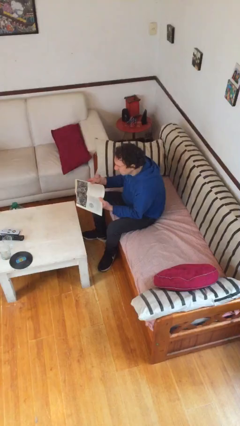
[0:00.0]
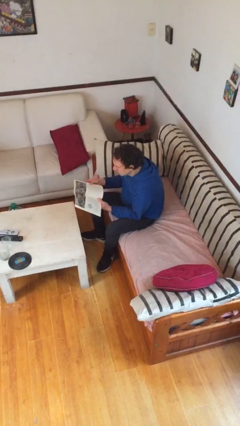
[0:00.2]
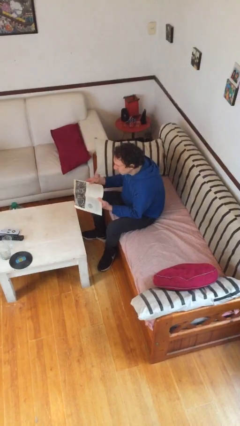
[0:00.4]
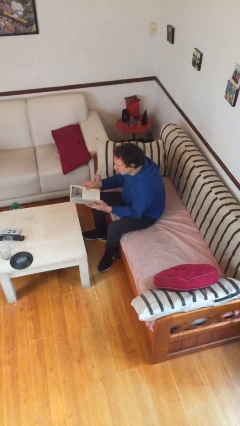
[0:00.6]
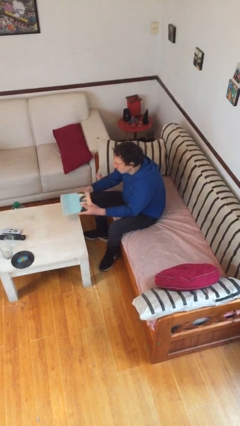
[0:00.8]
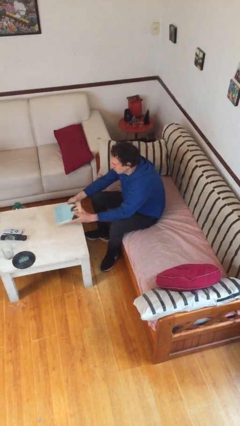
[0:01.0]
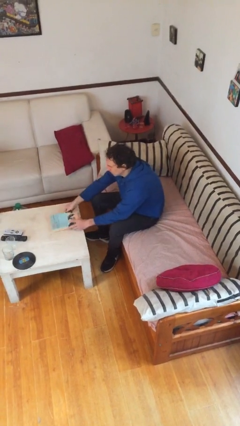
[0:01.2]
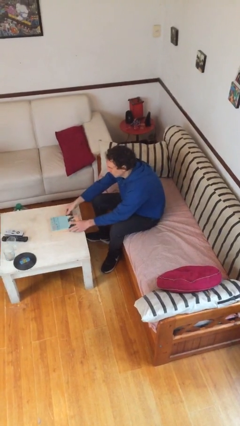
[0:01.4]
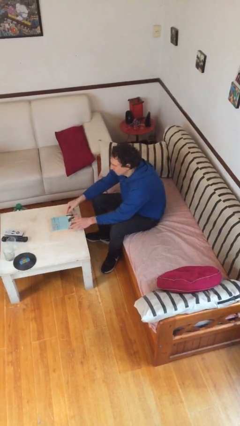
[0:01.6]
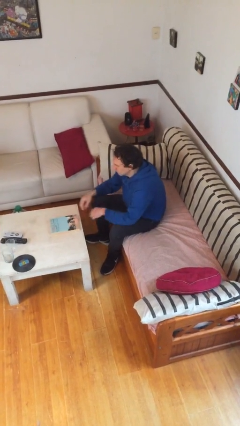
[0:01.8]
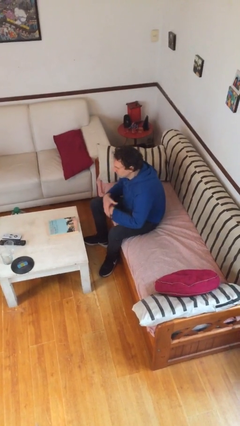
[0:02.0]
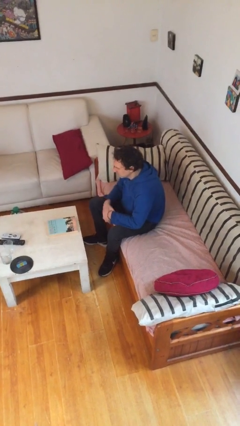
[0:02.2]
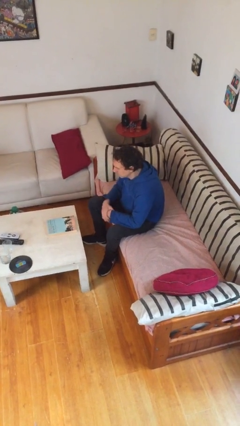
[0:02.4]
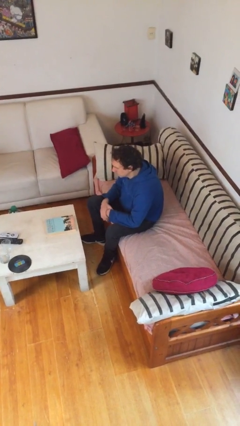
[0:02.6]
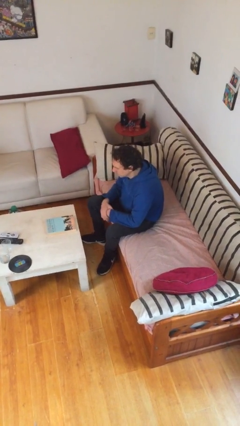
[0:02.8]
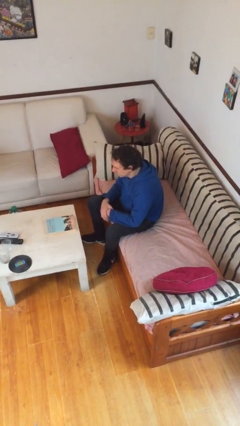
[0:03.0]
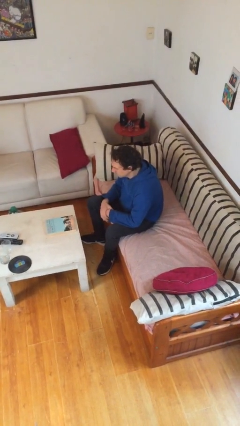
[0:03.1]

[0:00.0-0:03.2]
person puts down object on table

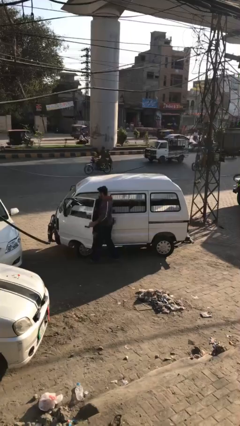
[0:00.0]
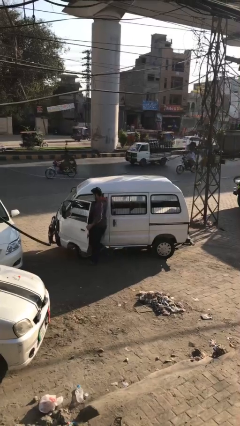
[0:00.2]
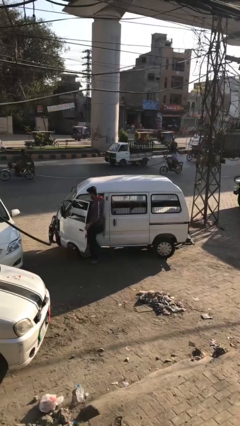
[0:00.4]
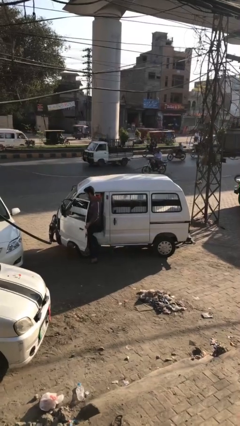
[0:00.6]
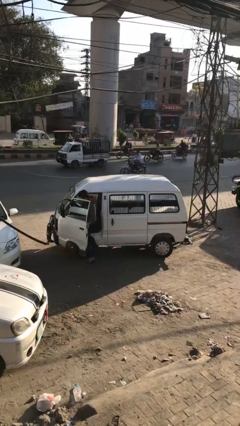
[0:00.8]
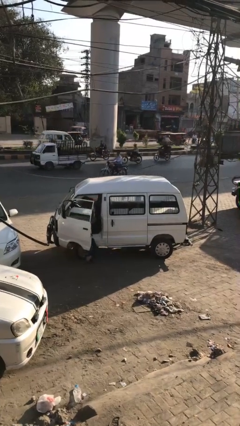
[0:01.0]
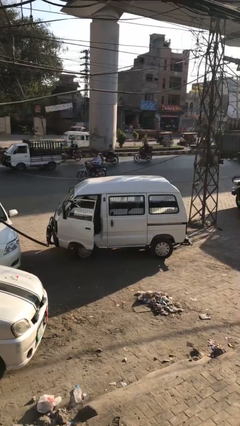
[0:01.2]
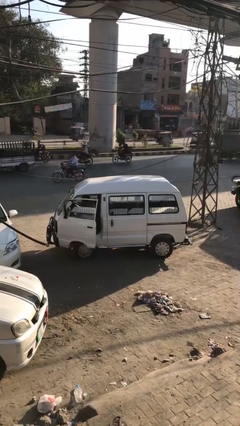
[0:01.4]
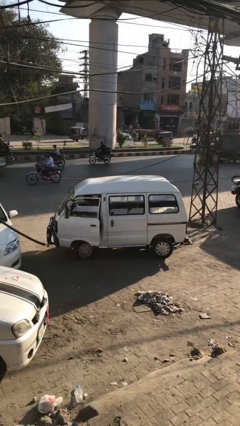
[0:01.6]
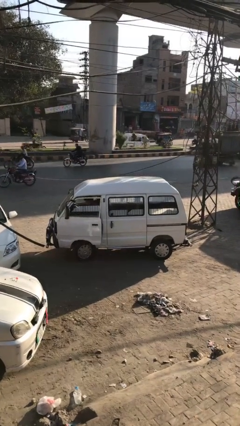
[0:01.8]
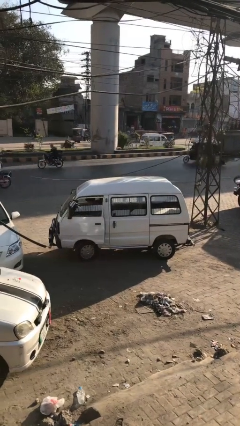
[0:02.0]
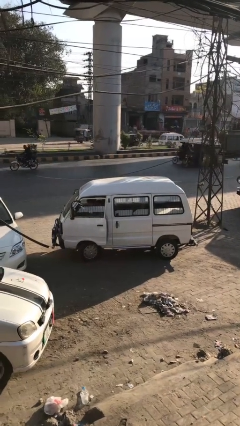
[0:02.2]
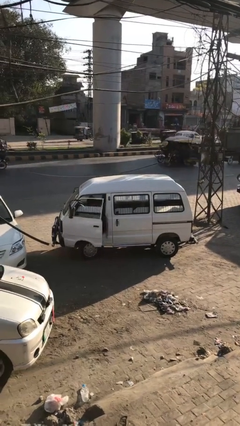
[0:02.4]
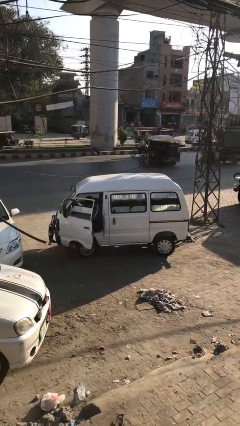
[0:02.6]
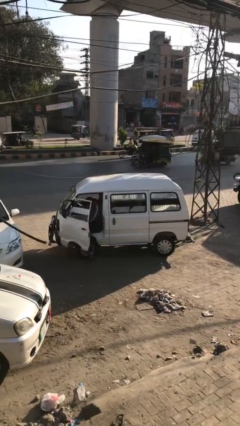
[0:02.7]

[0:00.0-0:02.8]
car picks up person

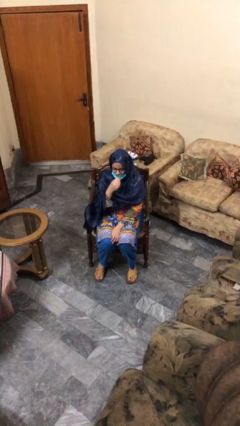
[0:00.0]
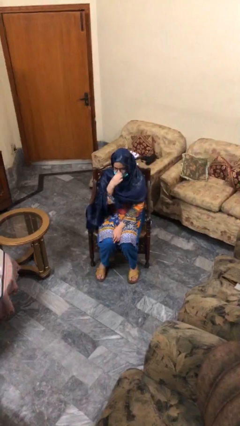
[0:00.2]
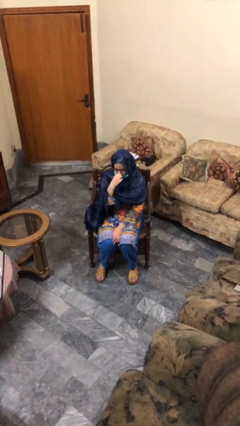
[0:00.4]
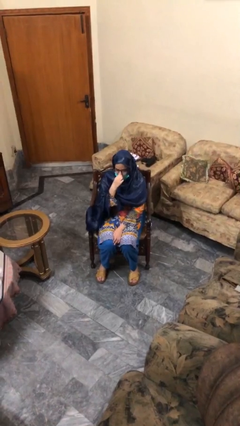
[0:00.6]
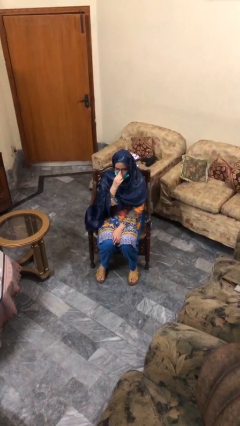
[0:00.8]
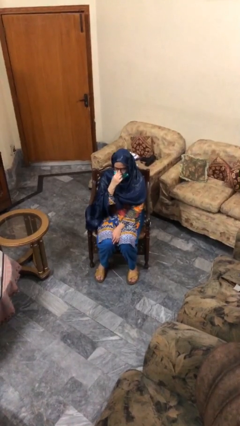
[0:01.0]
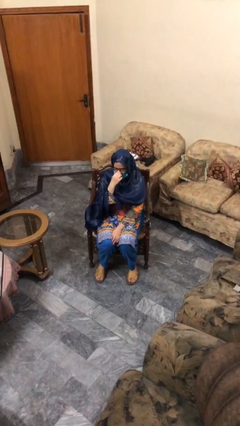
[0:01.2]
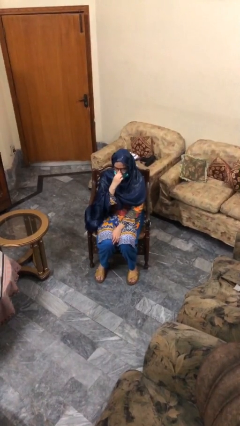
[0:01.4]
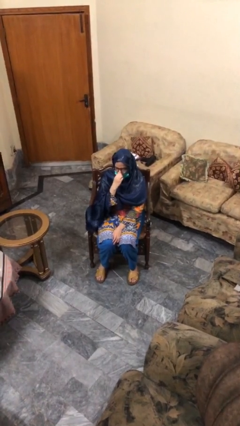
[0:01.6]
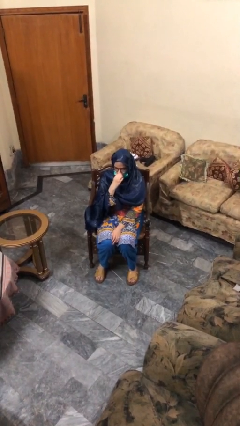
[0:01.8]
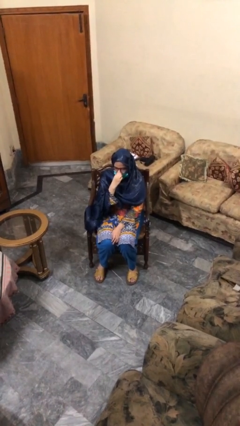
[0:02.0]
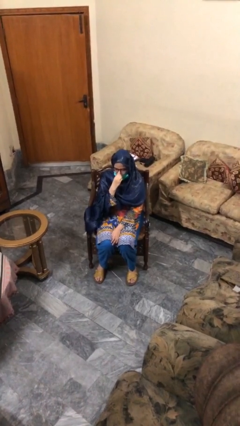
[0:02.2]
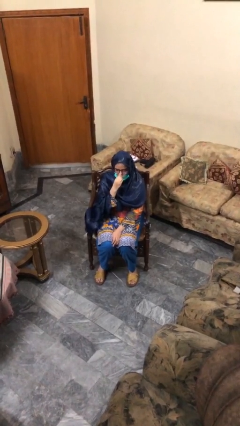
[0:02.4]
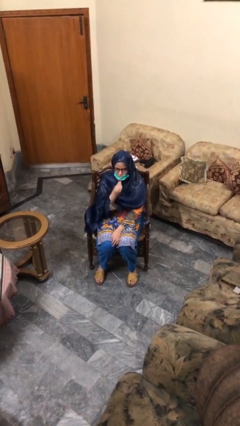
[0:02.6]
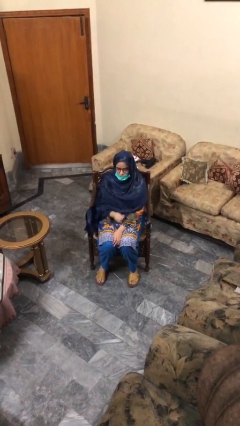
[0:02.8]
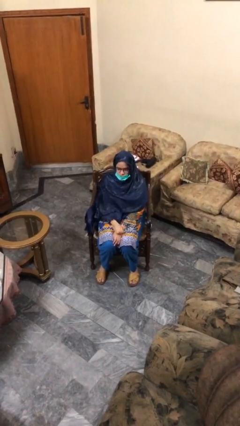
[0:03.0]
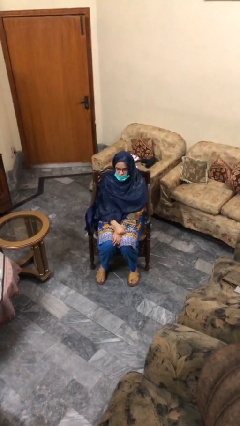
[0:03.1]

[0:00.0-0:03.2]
person blows nose

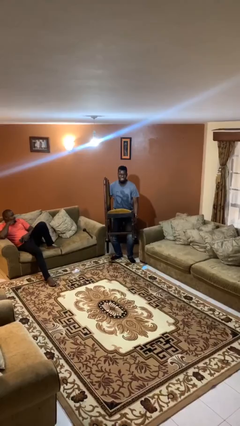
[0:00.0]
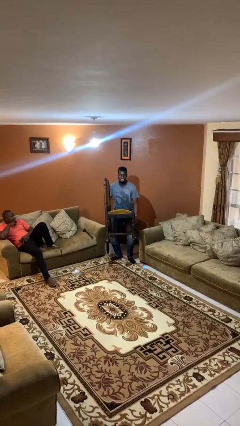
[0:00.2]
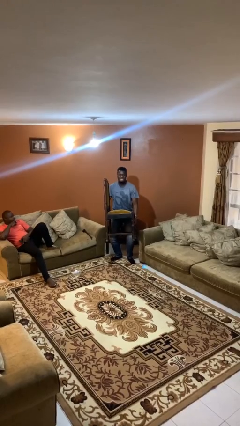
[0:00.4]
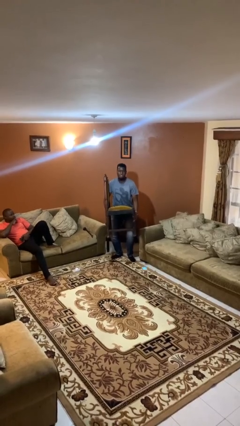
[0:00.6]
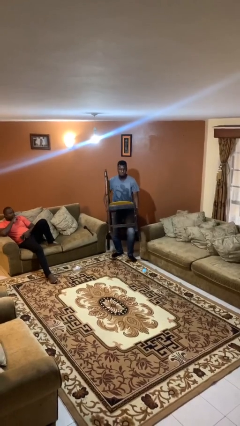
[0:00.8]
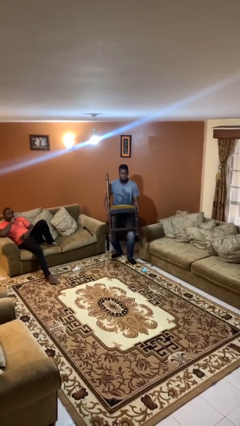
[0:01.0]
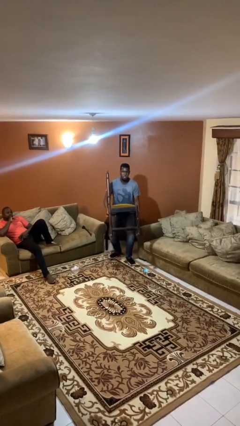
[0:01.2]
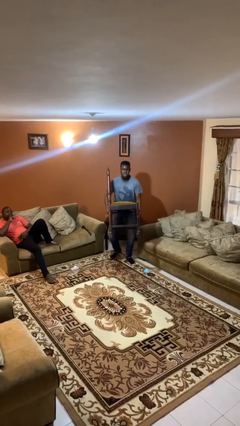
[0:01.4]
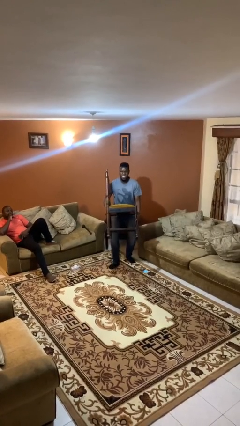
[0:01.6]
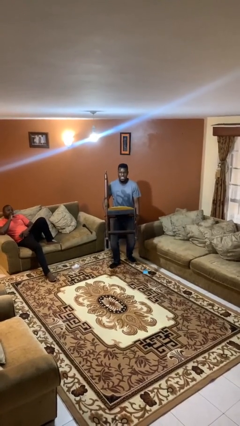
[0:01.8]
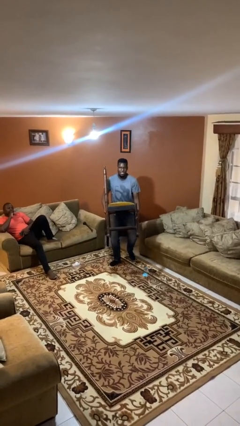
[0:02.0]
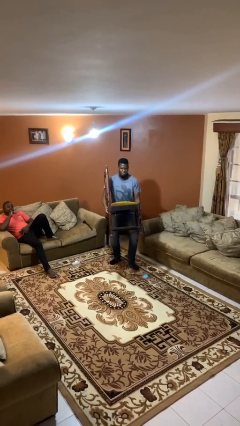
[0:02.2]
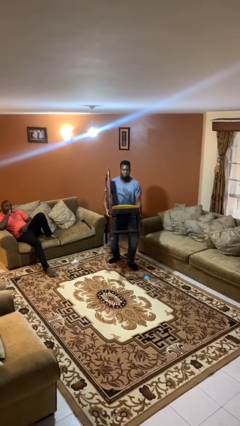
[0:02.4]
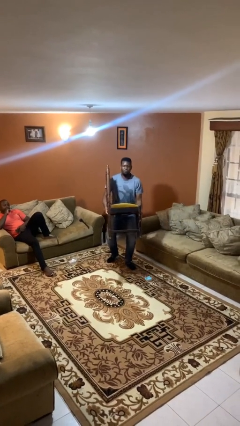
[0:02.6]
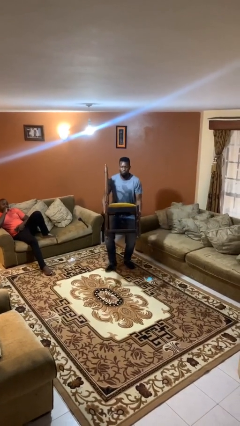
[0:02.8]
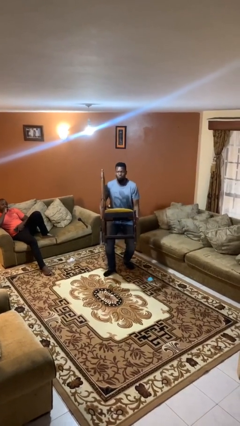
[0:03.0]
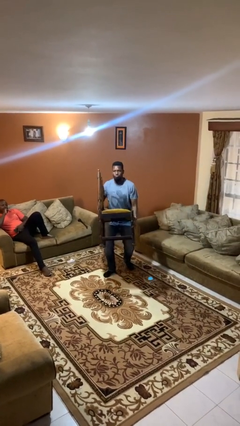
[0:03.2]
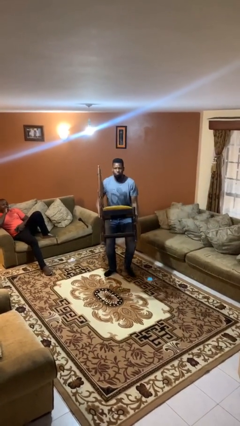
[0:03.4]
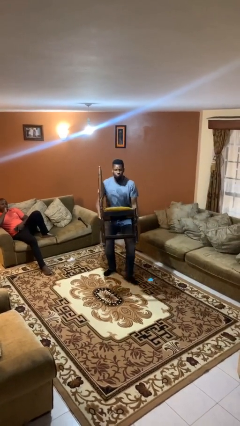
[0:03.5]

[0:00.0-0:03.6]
person carries heavy object

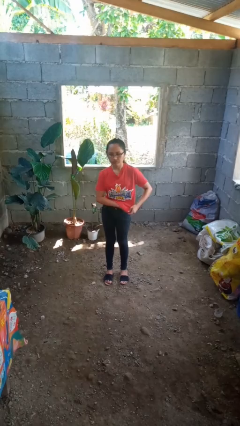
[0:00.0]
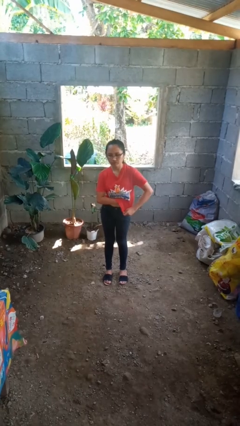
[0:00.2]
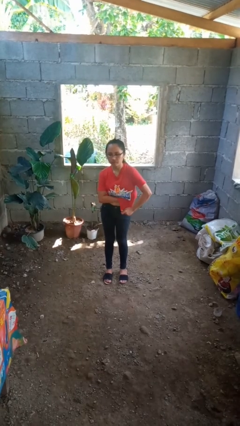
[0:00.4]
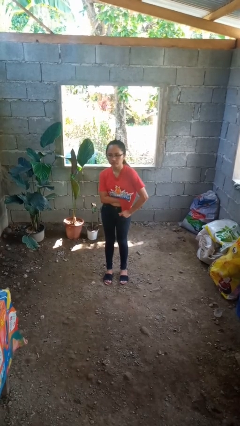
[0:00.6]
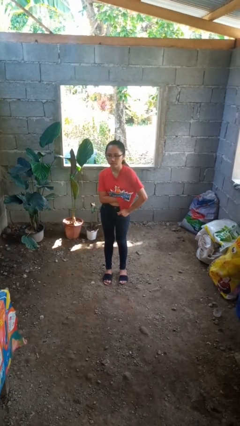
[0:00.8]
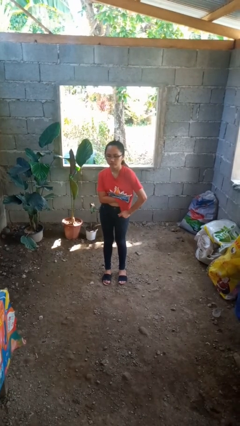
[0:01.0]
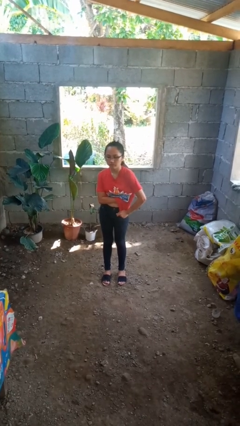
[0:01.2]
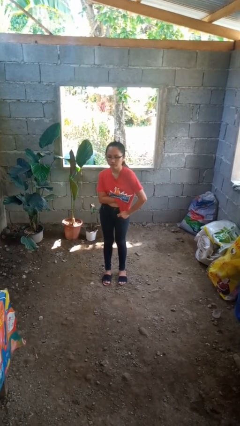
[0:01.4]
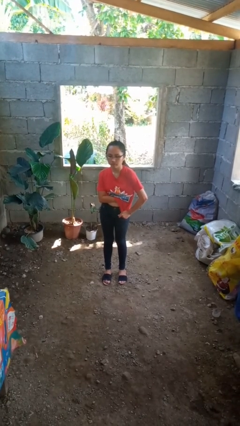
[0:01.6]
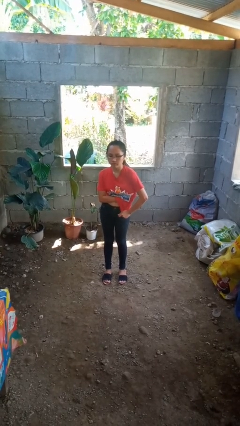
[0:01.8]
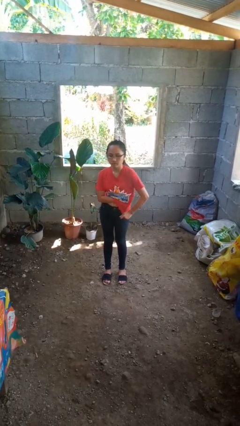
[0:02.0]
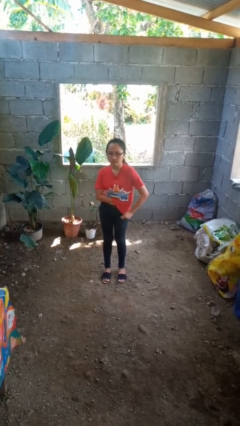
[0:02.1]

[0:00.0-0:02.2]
person applies deodorant

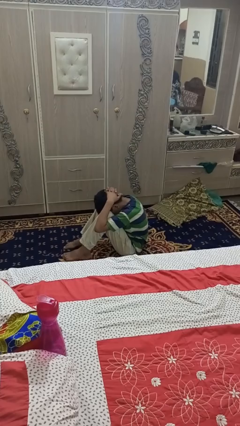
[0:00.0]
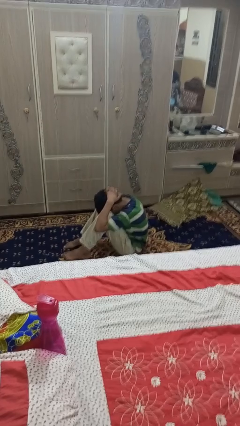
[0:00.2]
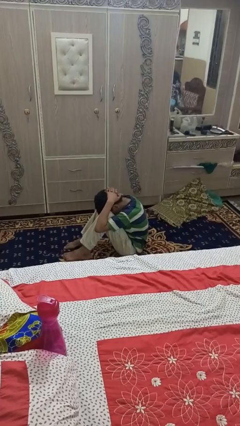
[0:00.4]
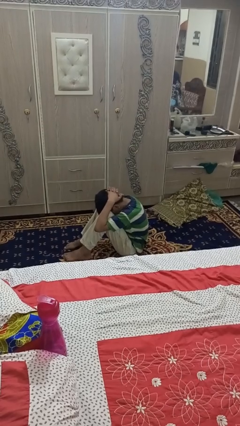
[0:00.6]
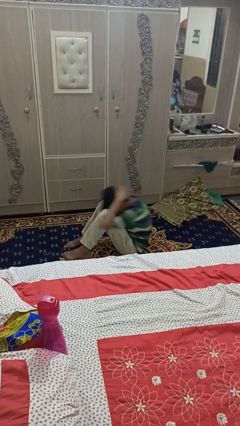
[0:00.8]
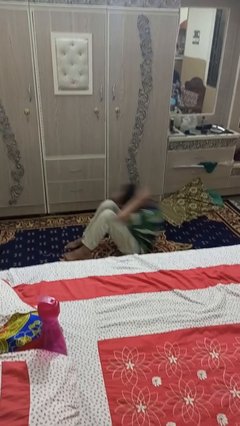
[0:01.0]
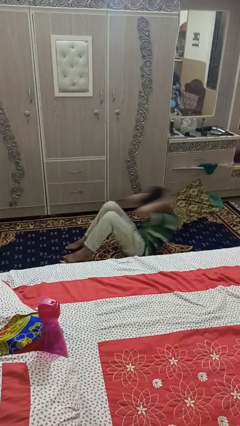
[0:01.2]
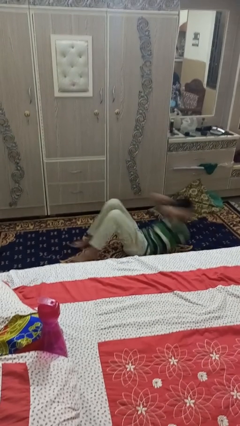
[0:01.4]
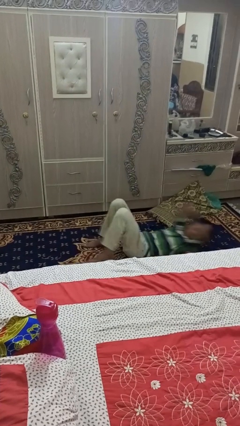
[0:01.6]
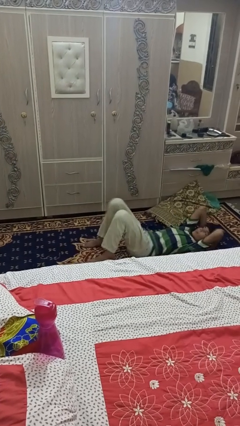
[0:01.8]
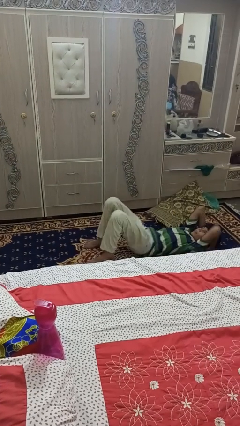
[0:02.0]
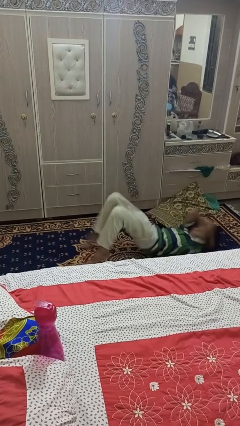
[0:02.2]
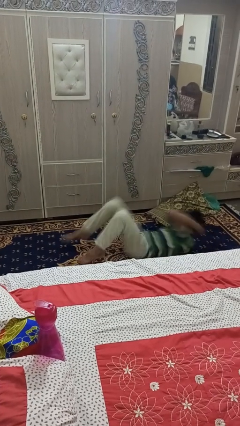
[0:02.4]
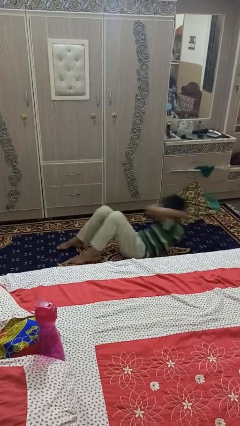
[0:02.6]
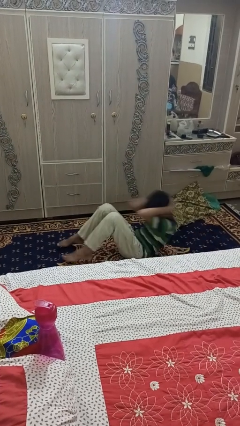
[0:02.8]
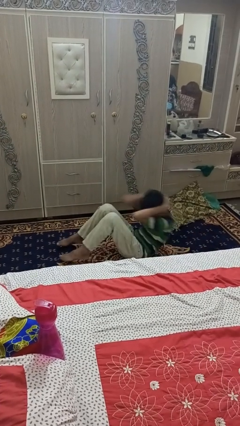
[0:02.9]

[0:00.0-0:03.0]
person exercises with situp
